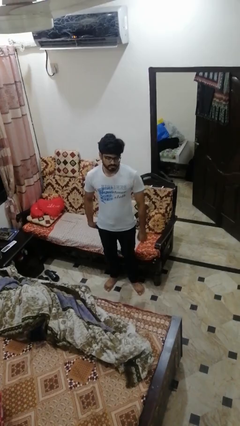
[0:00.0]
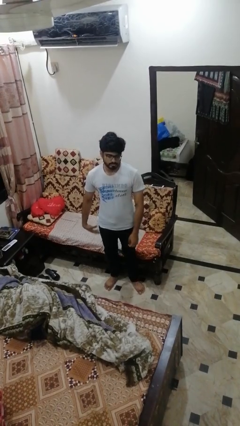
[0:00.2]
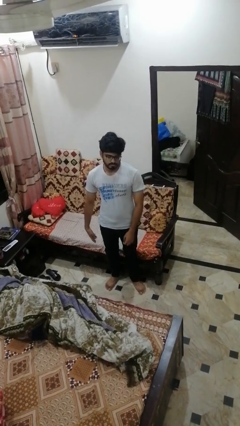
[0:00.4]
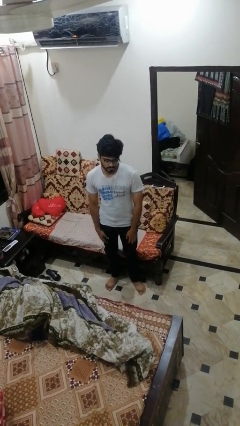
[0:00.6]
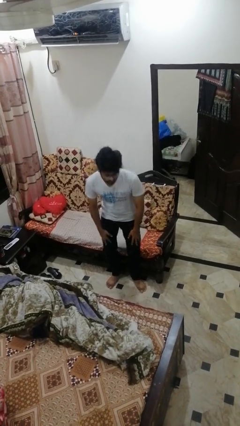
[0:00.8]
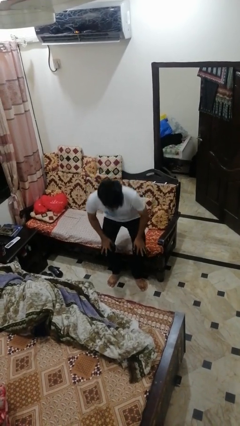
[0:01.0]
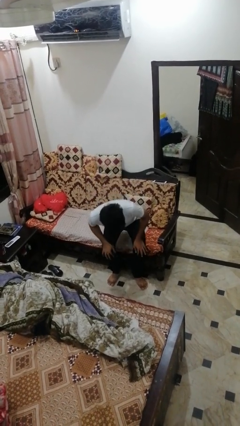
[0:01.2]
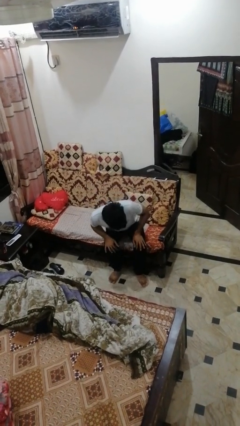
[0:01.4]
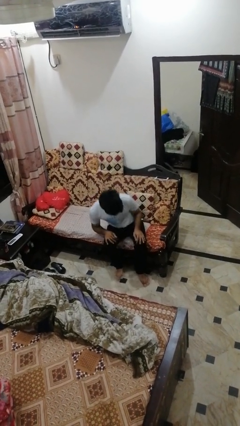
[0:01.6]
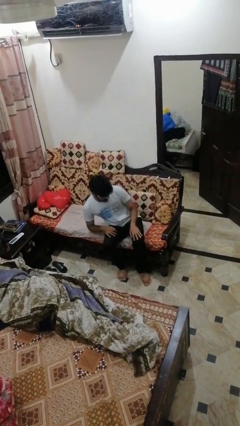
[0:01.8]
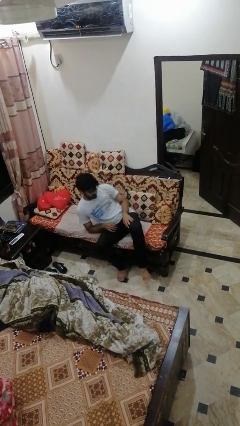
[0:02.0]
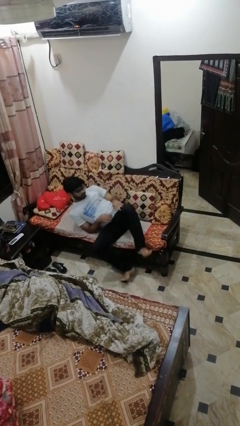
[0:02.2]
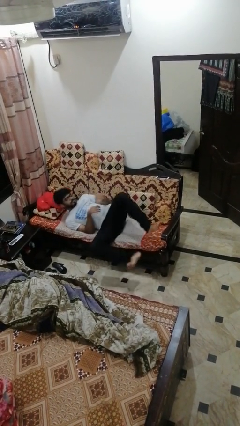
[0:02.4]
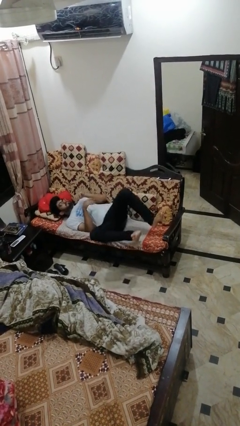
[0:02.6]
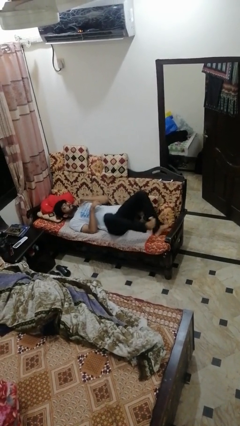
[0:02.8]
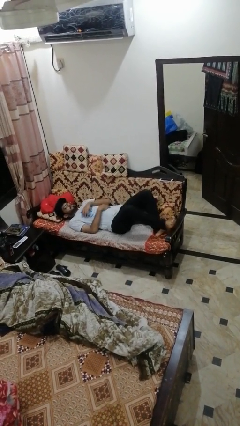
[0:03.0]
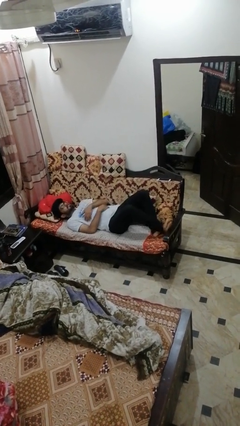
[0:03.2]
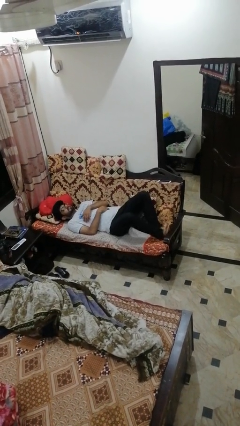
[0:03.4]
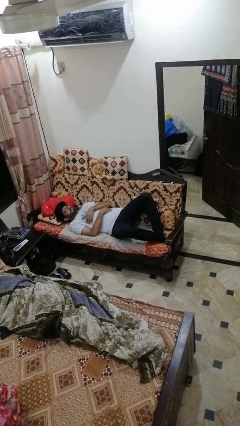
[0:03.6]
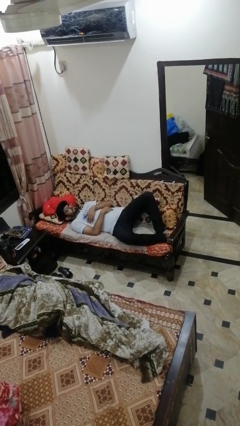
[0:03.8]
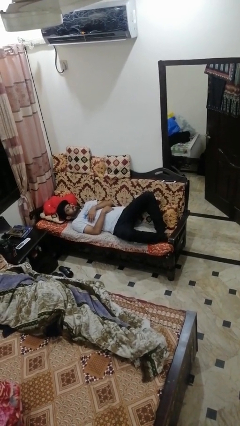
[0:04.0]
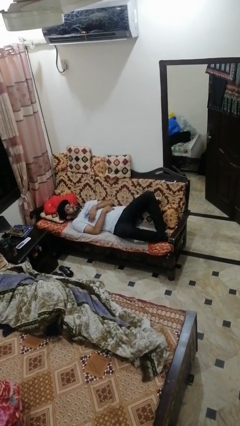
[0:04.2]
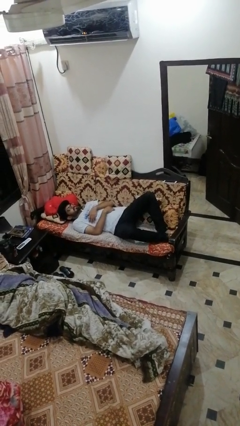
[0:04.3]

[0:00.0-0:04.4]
person lies down on couch

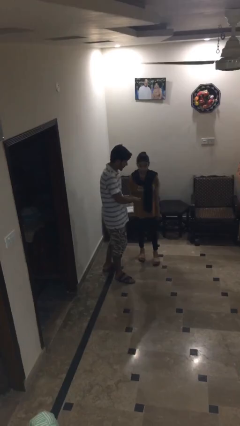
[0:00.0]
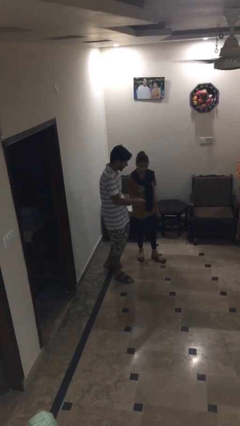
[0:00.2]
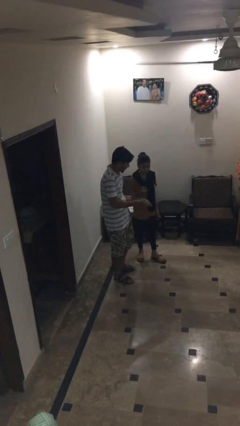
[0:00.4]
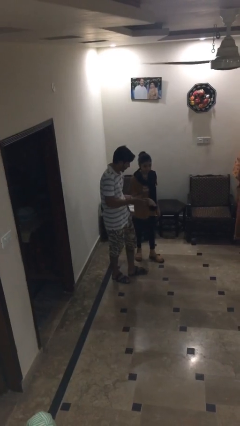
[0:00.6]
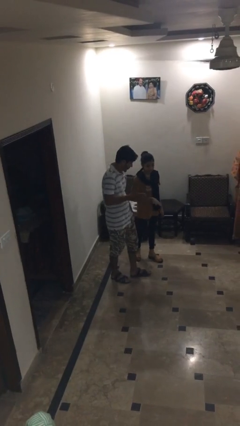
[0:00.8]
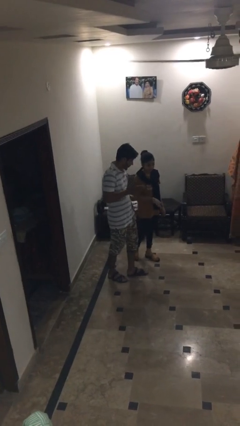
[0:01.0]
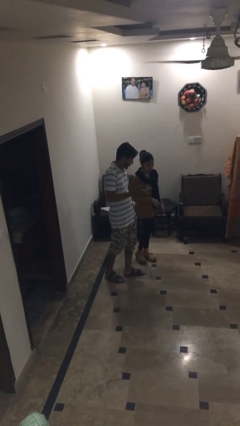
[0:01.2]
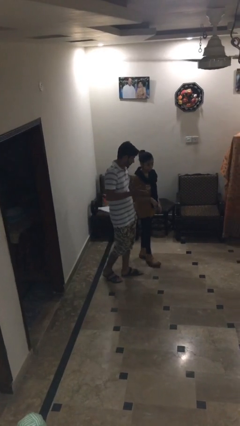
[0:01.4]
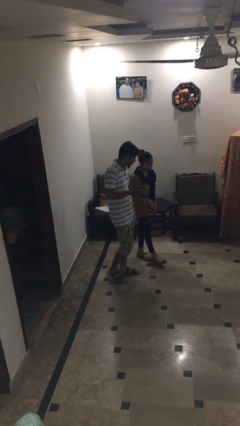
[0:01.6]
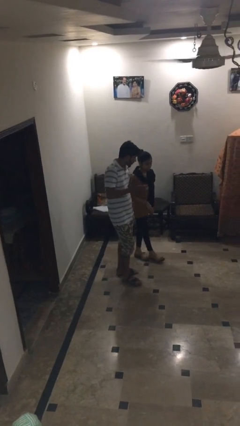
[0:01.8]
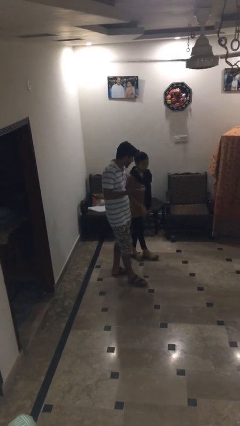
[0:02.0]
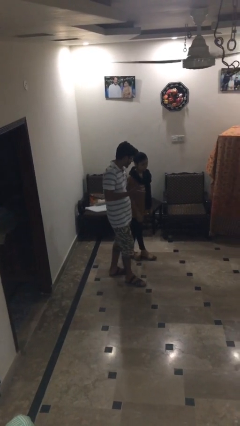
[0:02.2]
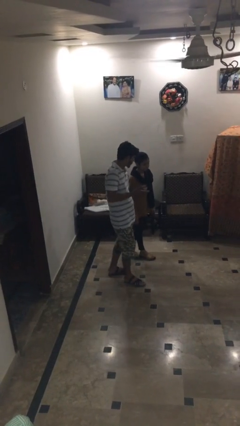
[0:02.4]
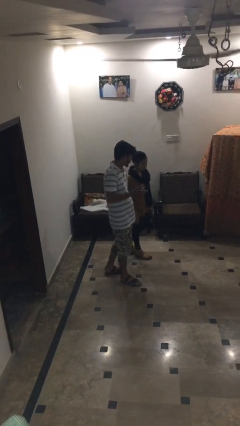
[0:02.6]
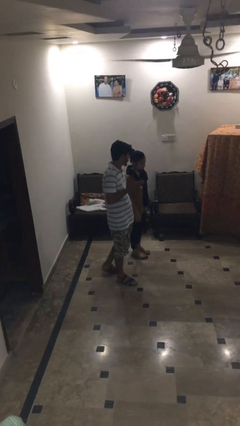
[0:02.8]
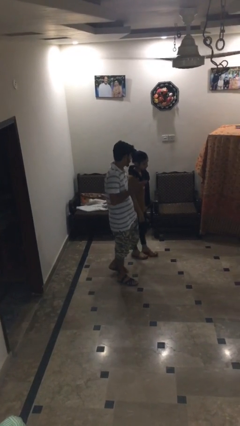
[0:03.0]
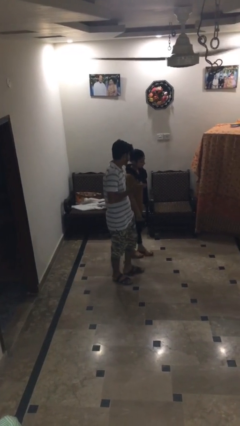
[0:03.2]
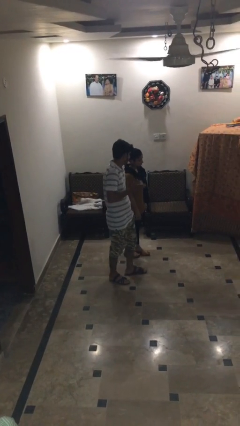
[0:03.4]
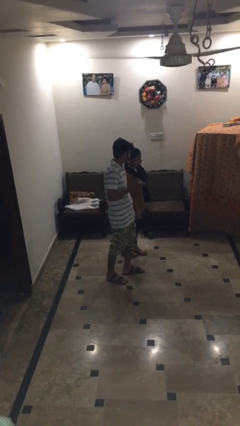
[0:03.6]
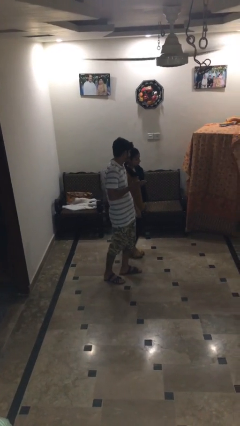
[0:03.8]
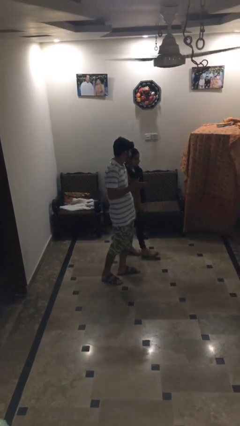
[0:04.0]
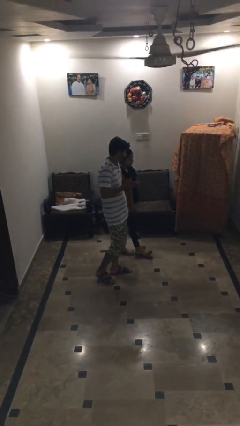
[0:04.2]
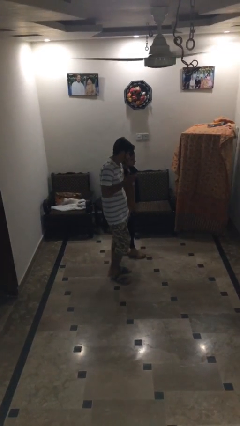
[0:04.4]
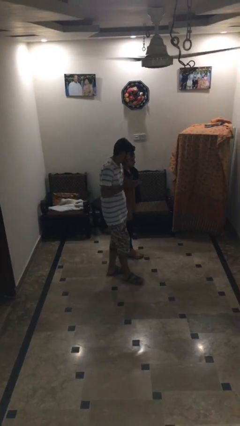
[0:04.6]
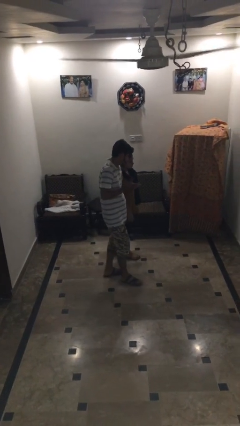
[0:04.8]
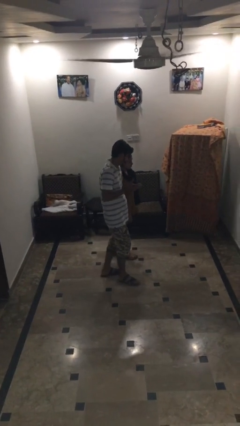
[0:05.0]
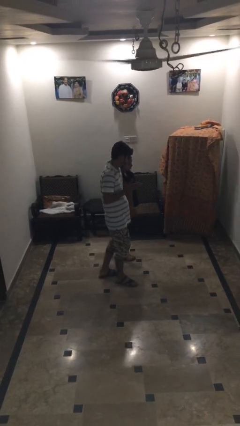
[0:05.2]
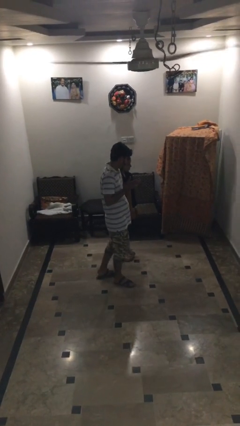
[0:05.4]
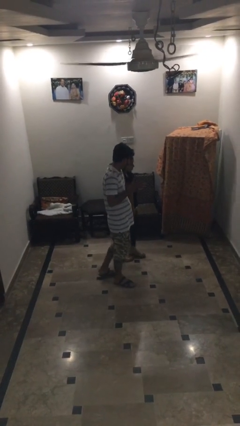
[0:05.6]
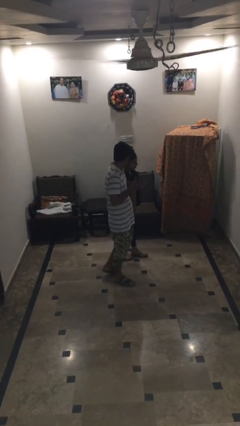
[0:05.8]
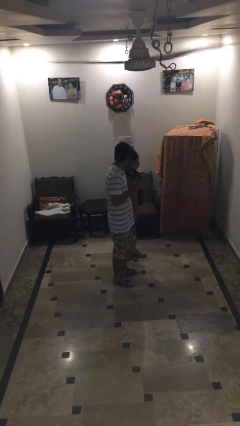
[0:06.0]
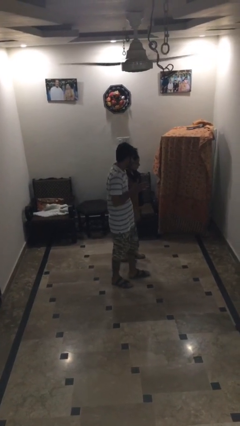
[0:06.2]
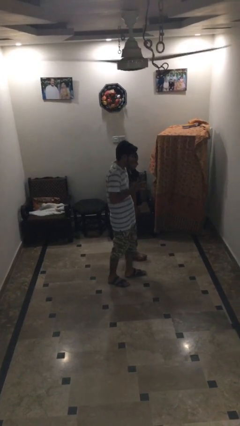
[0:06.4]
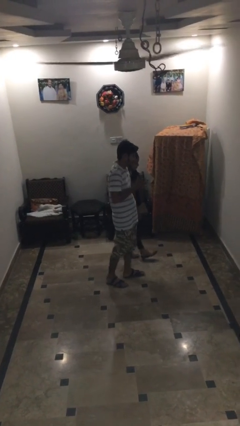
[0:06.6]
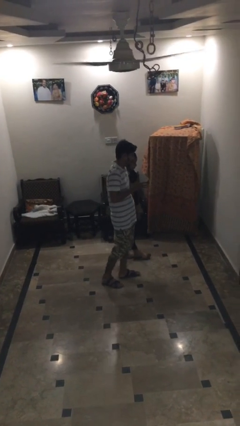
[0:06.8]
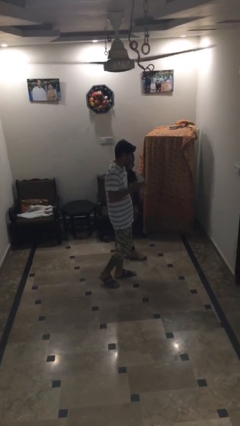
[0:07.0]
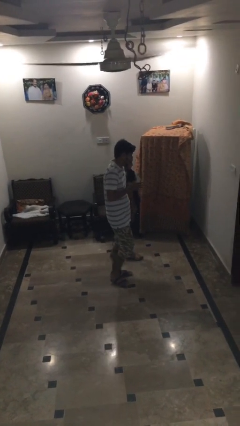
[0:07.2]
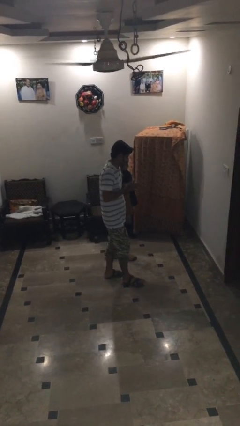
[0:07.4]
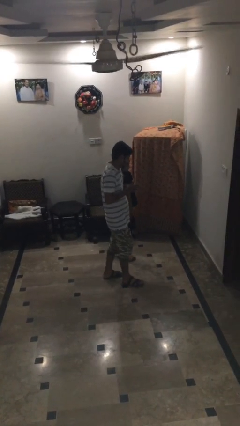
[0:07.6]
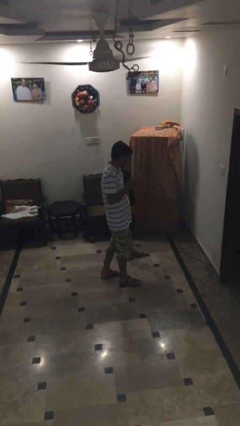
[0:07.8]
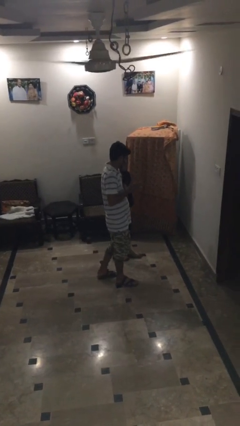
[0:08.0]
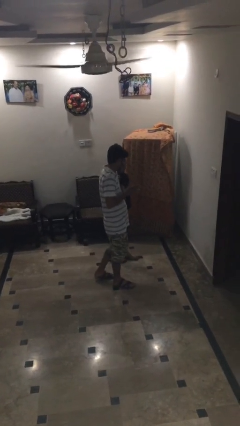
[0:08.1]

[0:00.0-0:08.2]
person talks to person

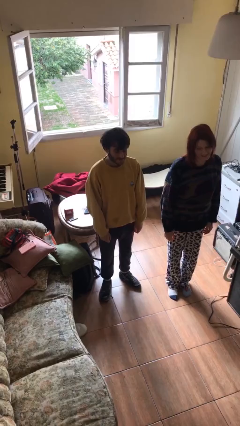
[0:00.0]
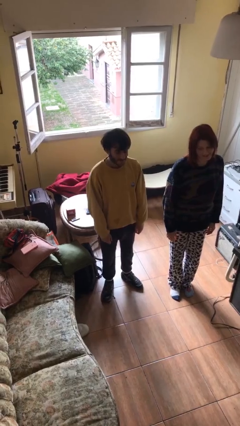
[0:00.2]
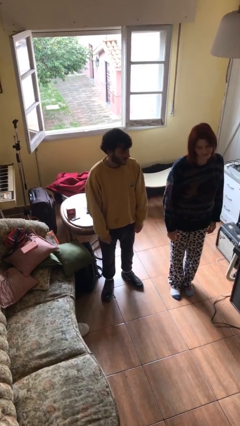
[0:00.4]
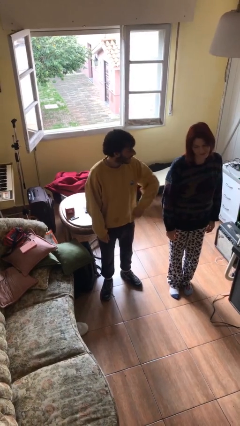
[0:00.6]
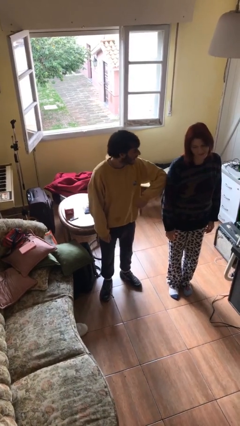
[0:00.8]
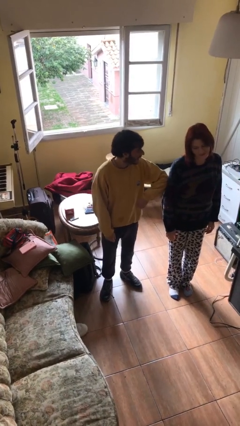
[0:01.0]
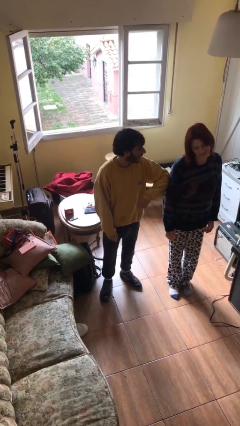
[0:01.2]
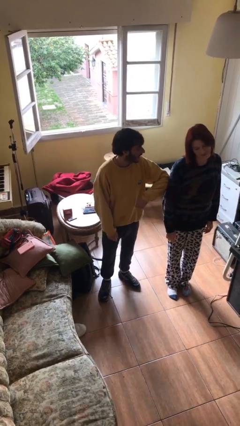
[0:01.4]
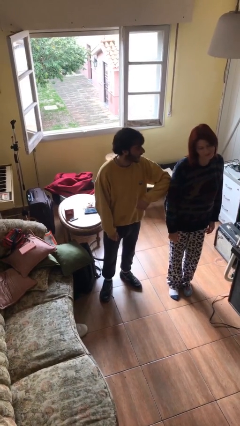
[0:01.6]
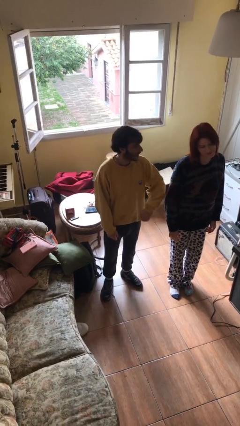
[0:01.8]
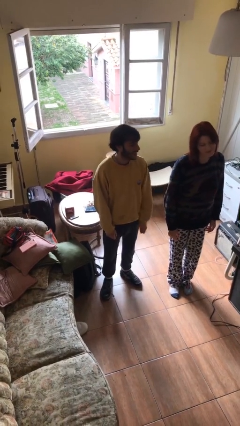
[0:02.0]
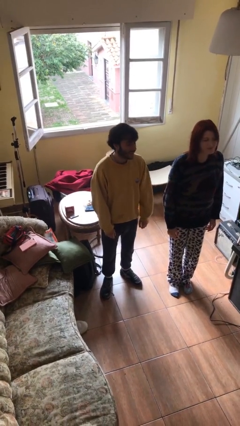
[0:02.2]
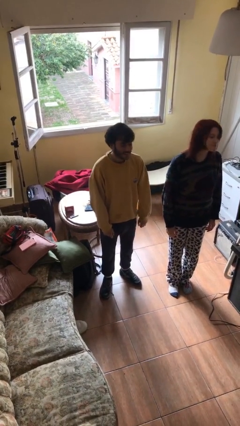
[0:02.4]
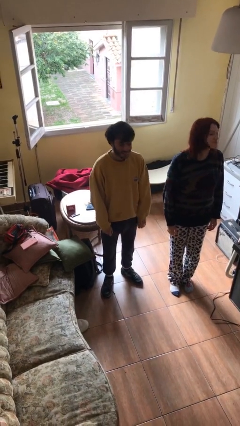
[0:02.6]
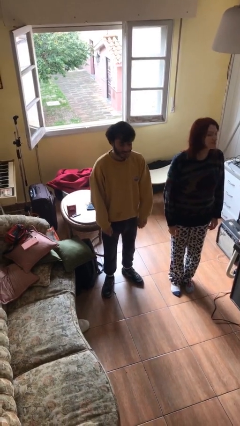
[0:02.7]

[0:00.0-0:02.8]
person nudges person with elbow

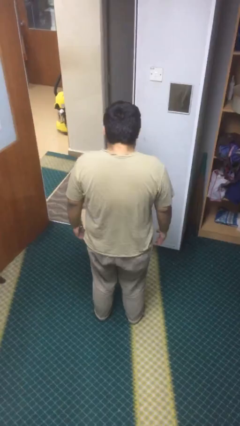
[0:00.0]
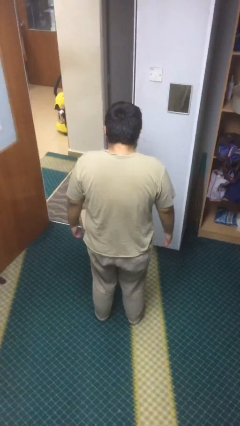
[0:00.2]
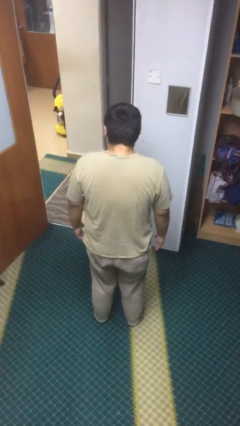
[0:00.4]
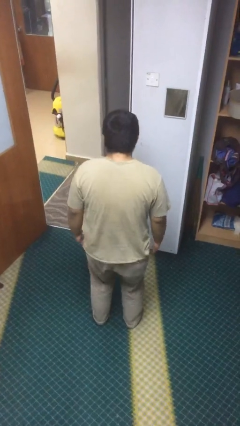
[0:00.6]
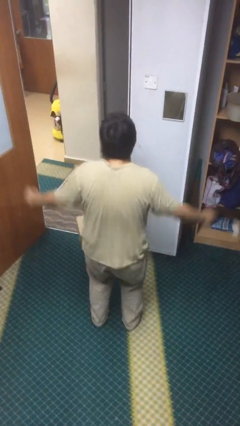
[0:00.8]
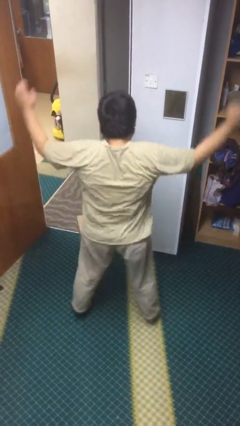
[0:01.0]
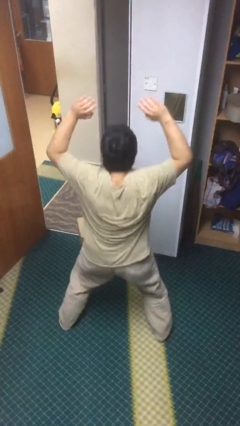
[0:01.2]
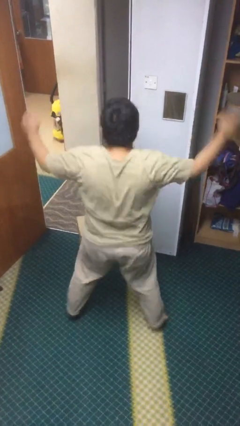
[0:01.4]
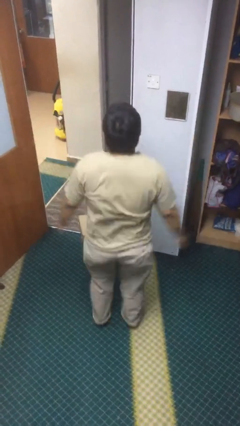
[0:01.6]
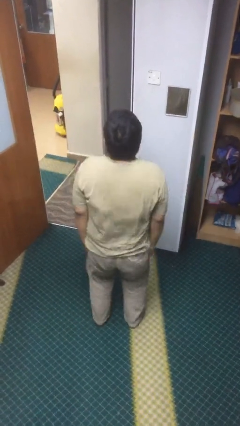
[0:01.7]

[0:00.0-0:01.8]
person exercises with jumping jacks

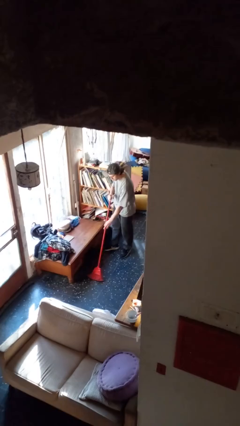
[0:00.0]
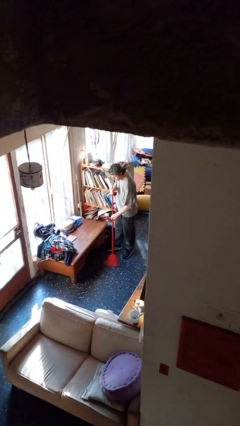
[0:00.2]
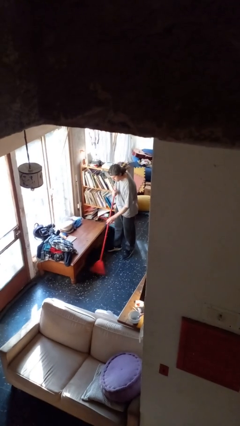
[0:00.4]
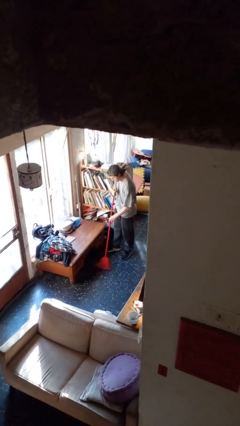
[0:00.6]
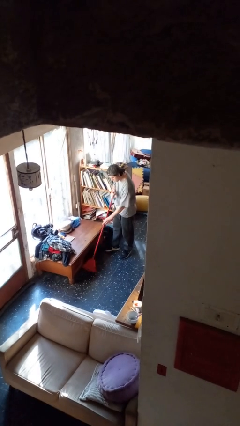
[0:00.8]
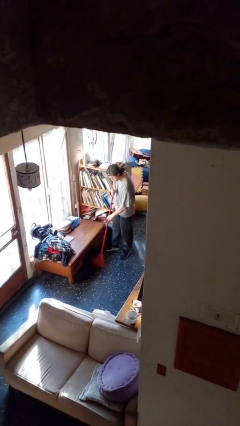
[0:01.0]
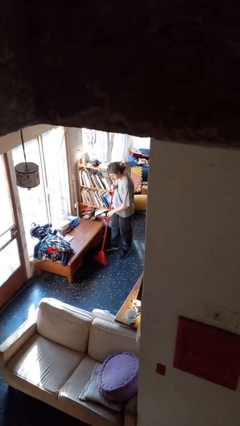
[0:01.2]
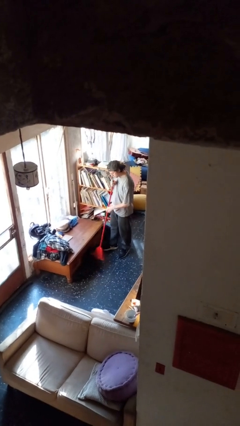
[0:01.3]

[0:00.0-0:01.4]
person sweeps floor
